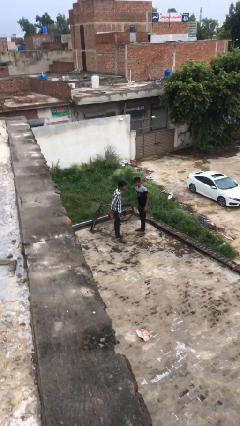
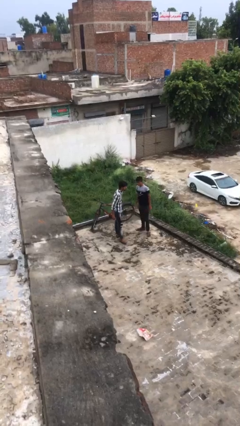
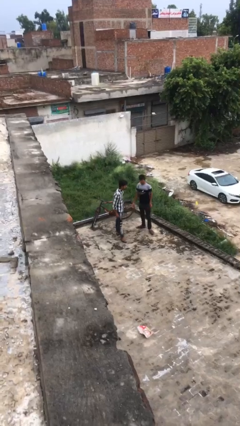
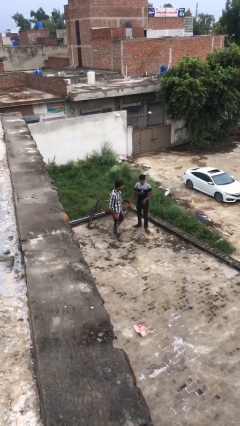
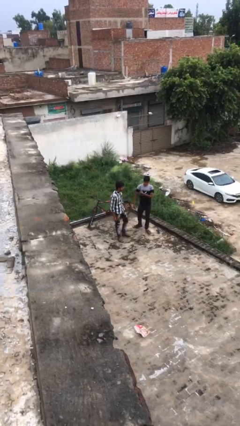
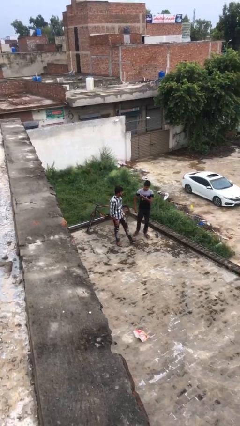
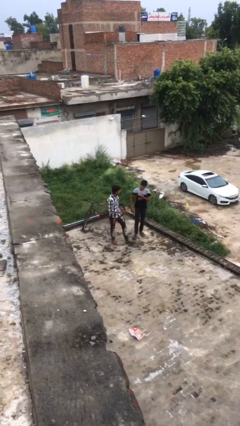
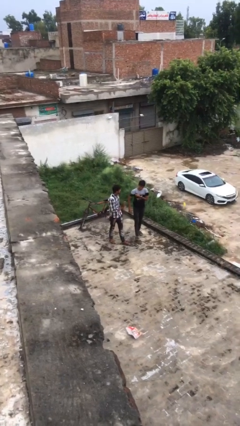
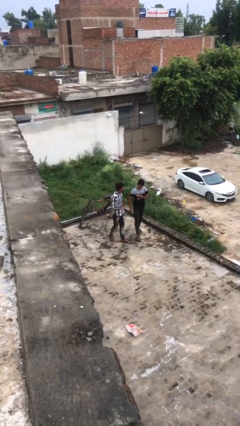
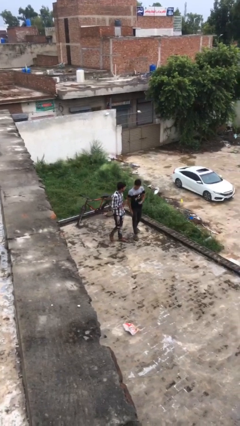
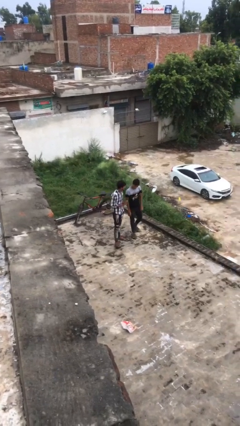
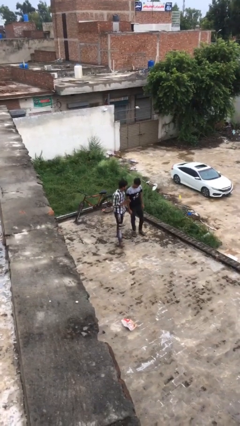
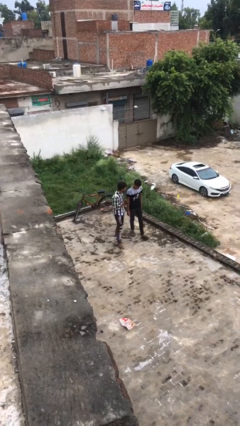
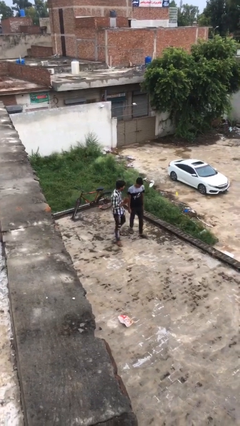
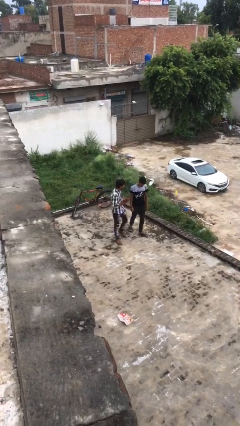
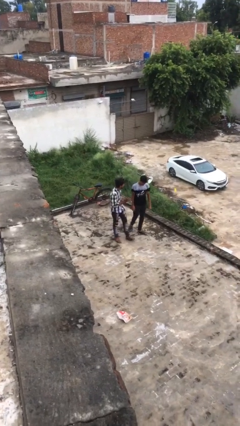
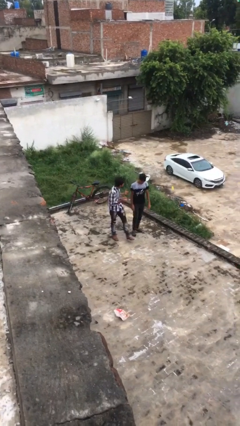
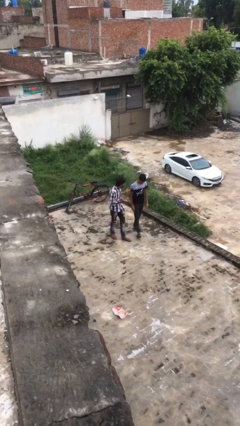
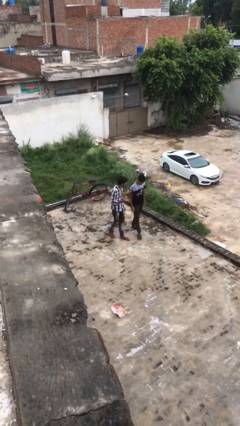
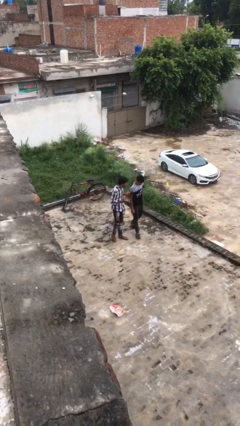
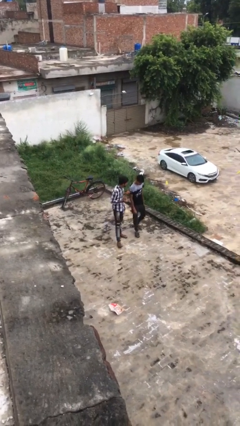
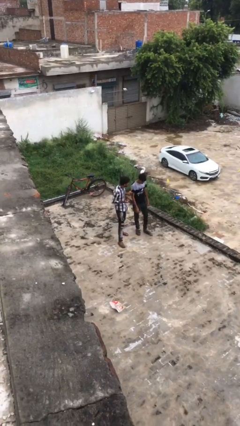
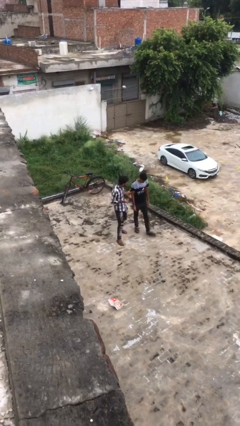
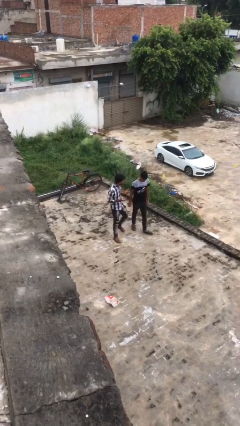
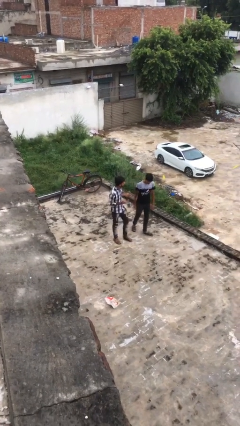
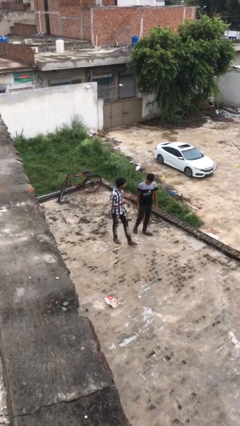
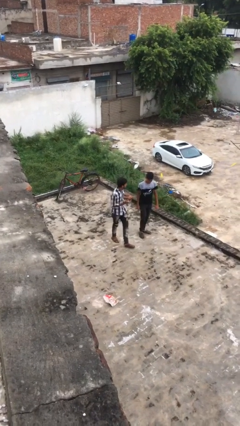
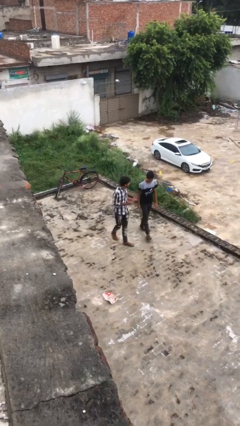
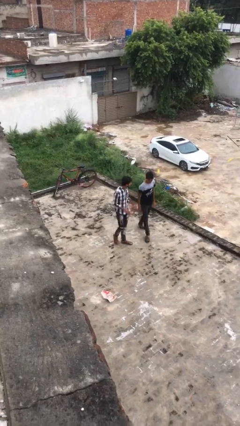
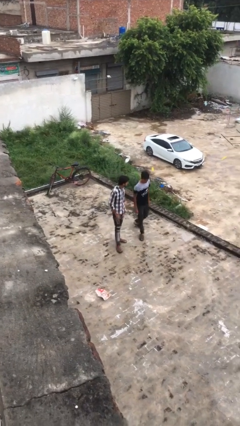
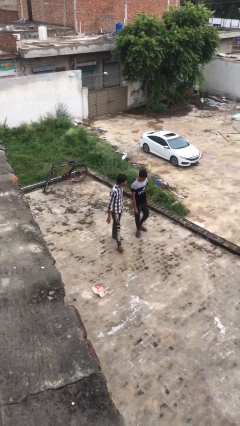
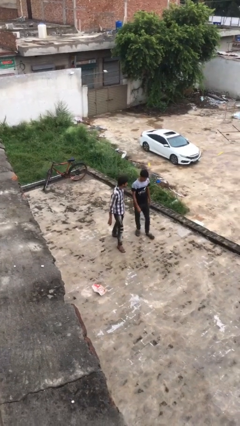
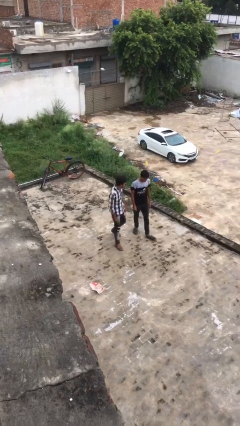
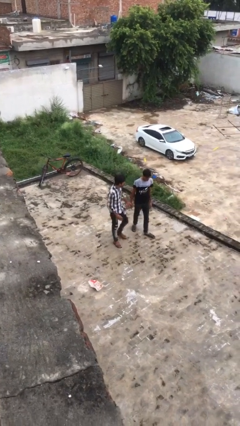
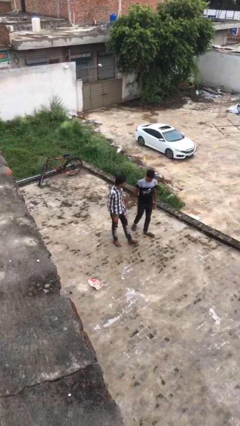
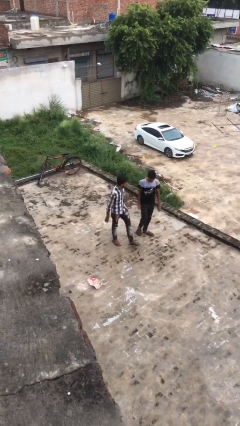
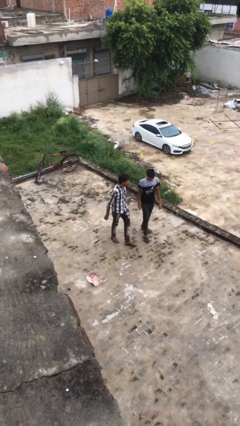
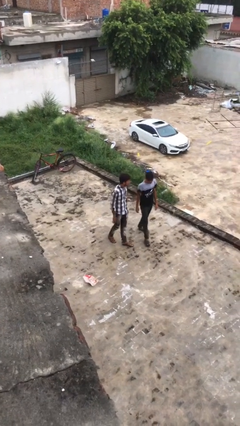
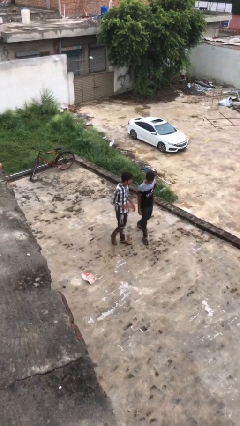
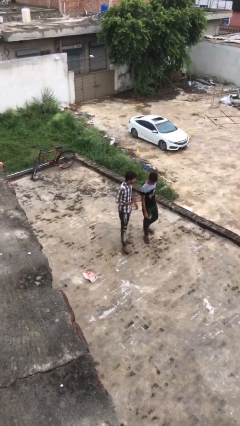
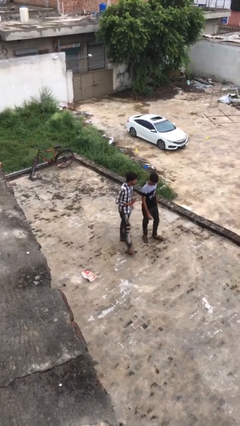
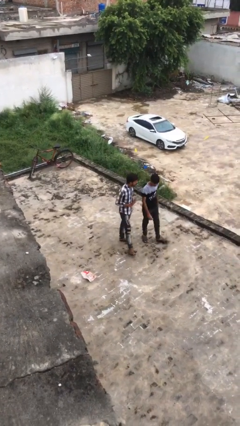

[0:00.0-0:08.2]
person talks to person

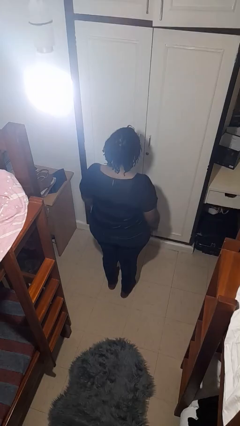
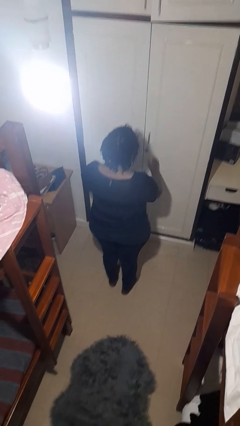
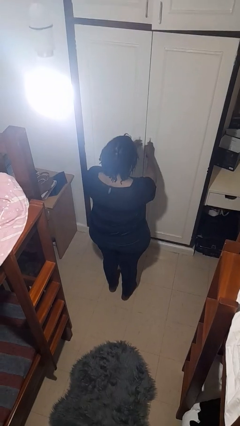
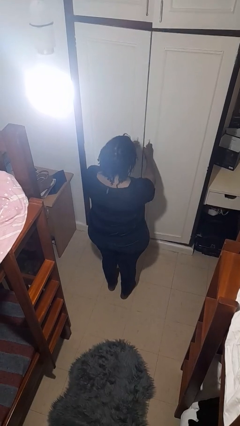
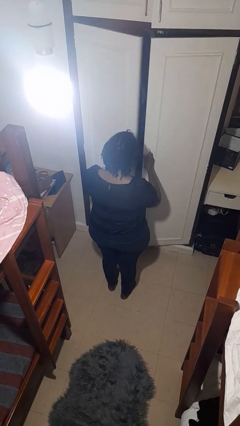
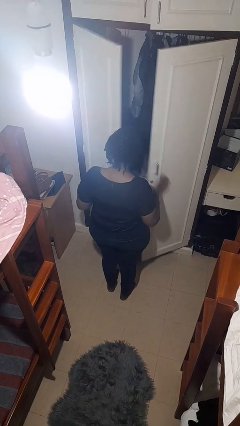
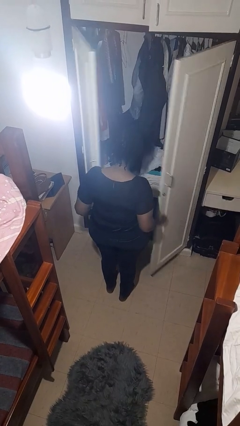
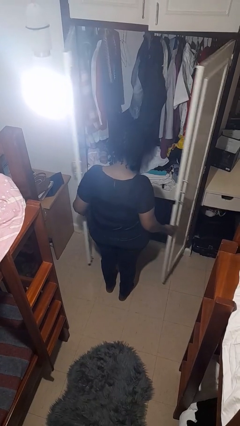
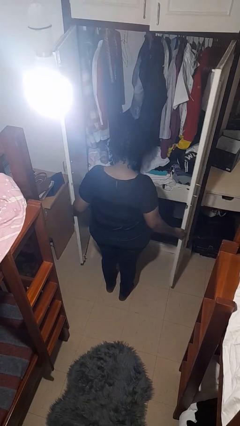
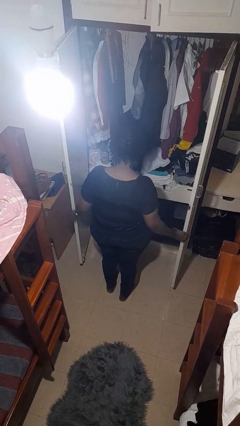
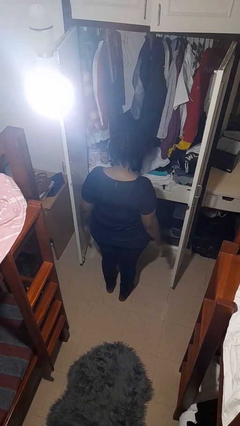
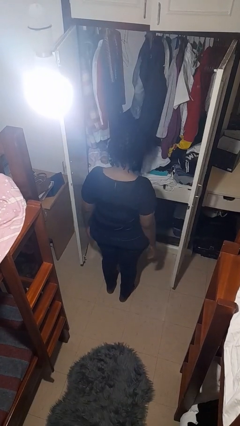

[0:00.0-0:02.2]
person opens closet door

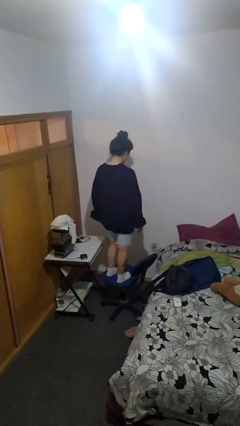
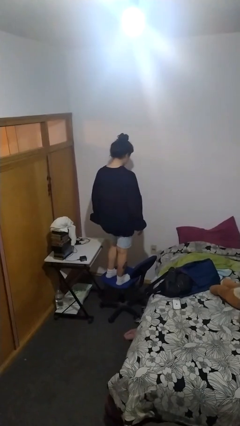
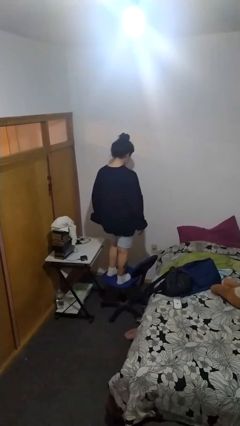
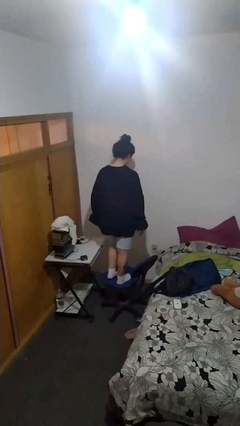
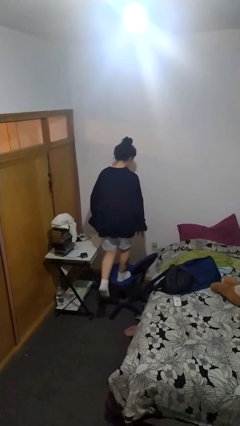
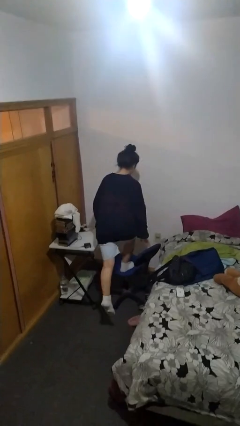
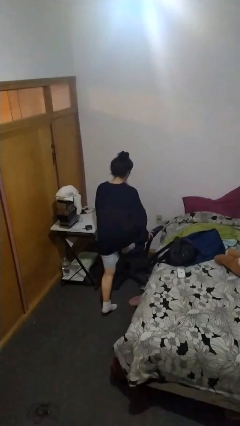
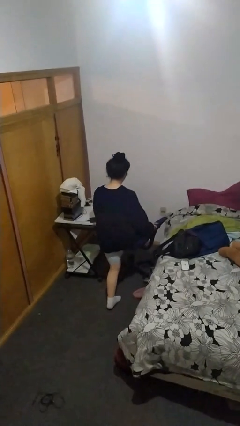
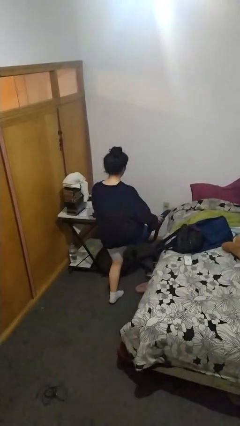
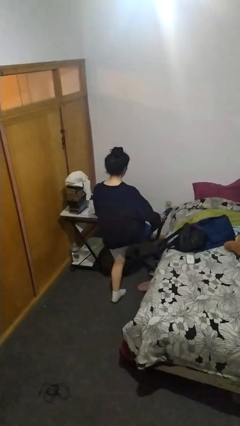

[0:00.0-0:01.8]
person climbs off chair

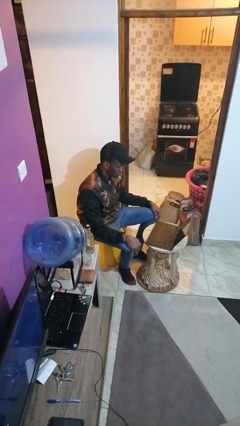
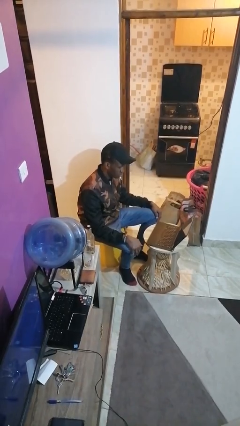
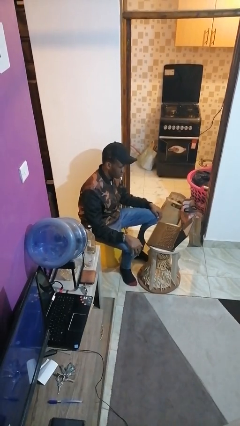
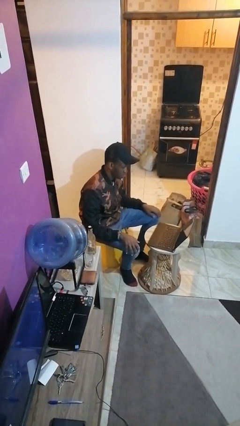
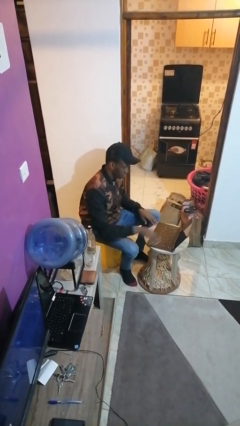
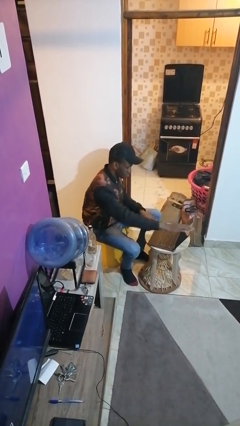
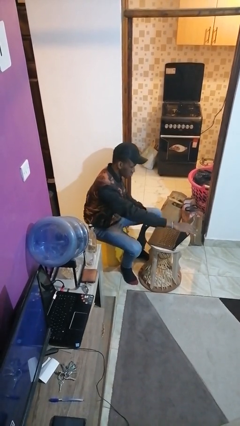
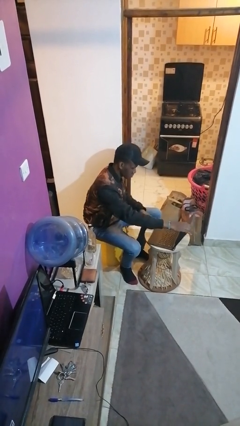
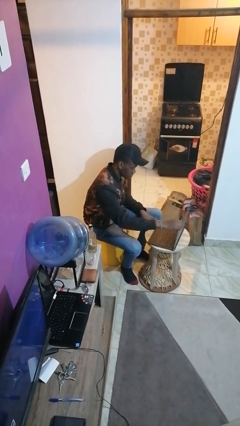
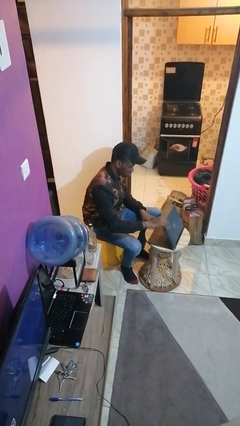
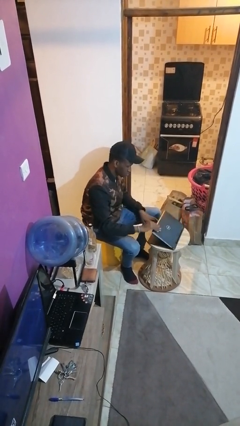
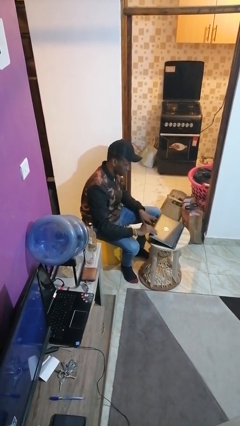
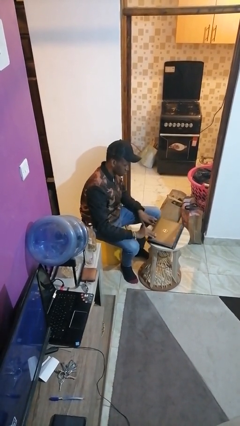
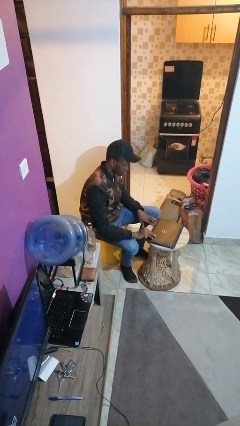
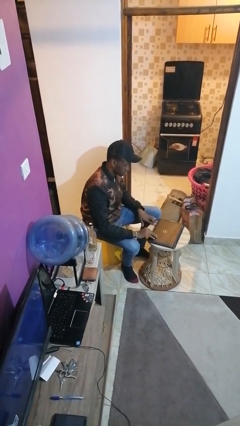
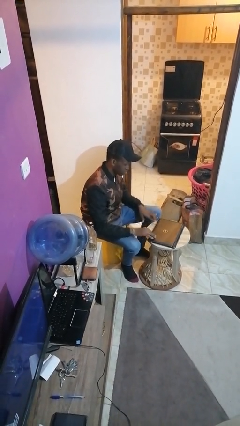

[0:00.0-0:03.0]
person closes laptop

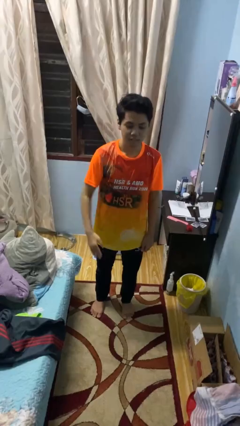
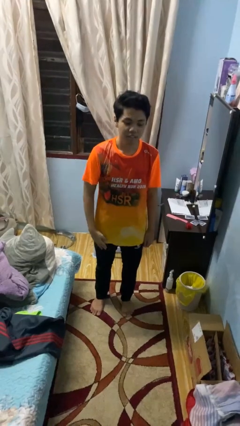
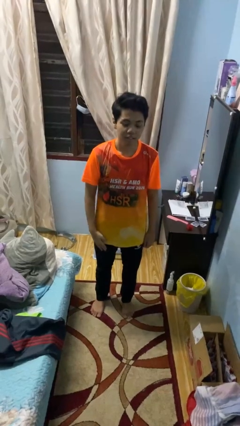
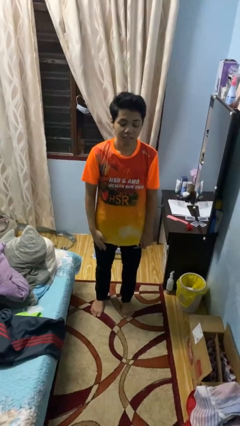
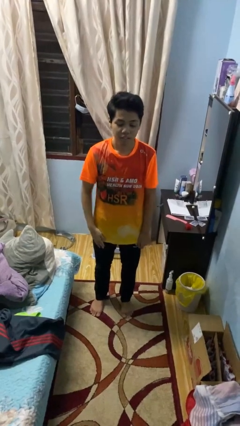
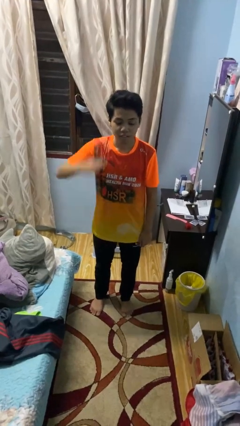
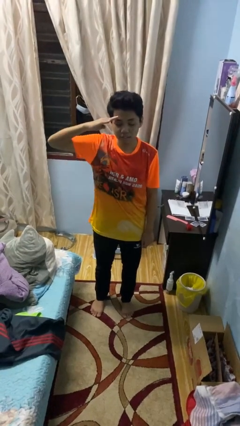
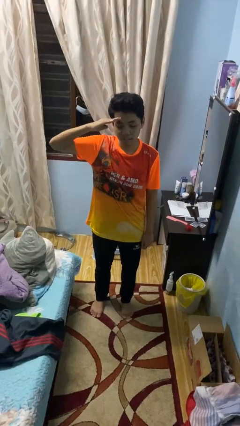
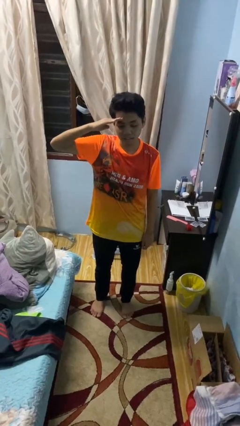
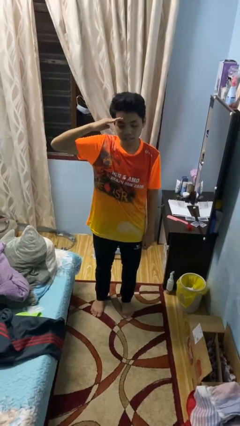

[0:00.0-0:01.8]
person salutes

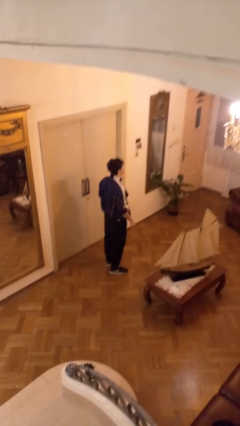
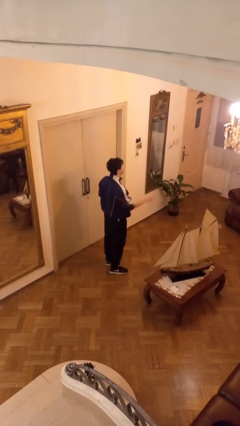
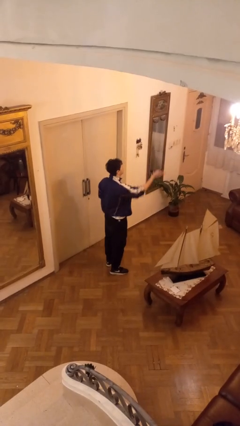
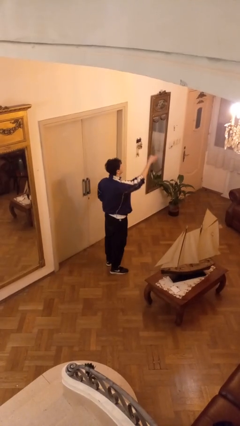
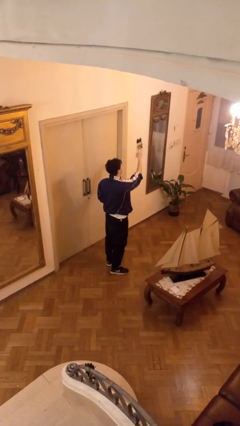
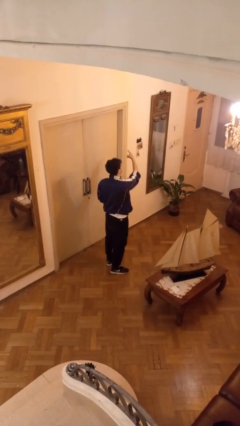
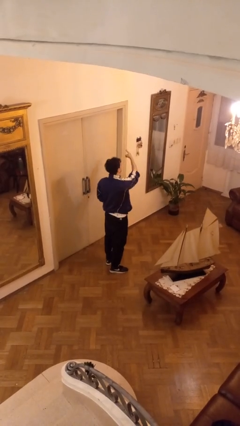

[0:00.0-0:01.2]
person gestures swipe left
